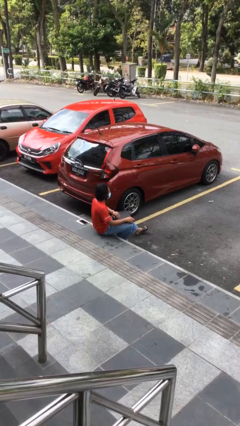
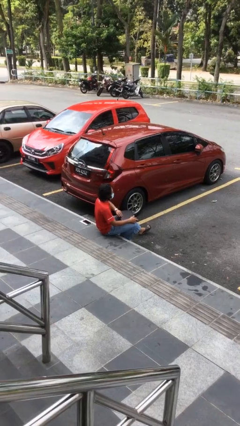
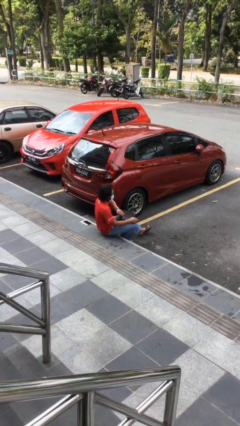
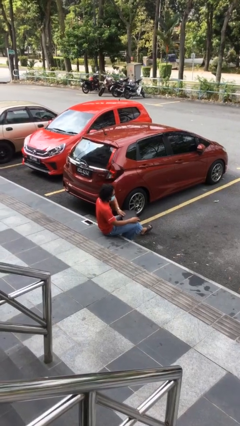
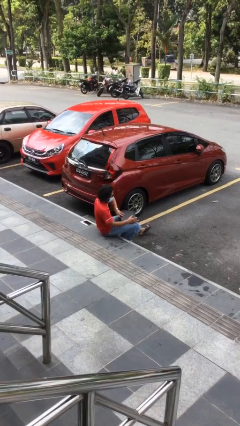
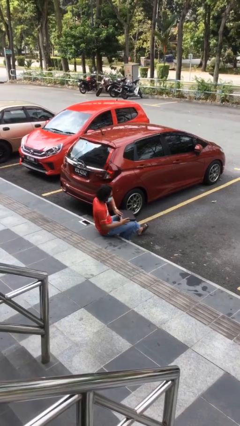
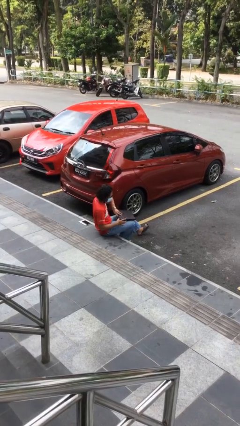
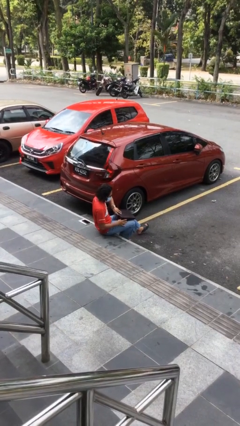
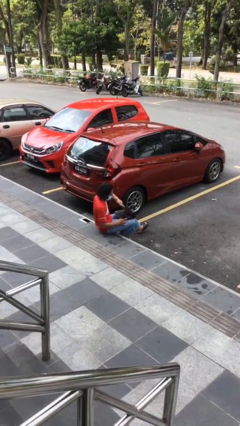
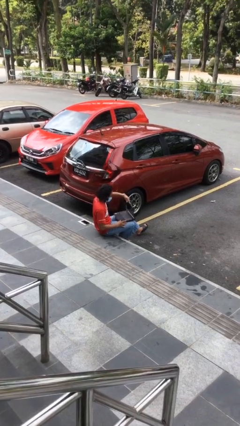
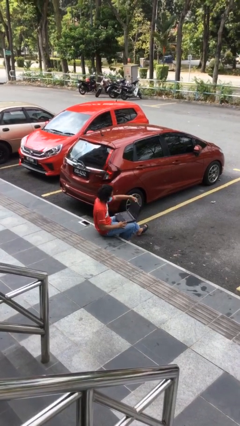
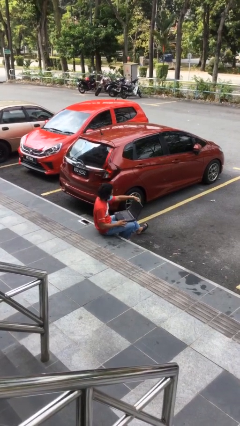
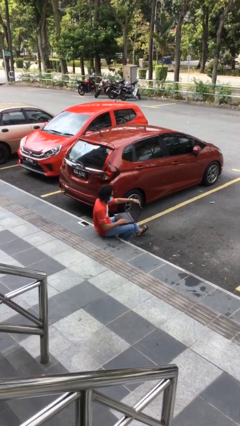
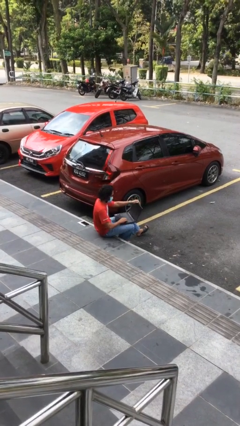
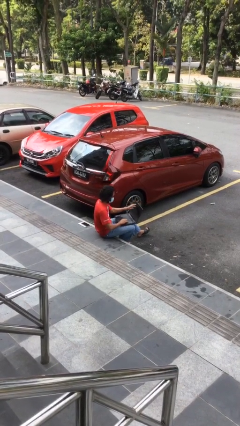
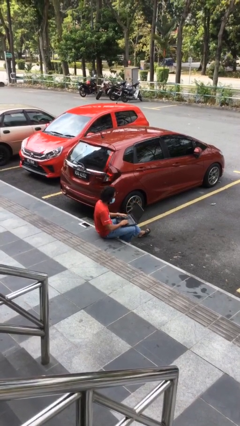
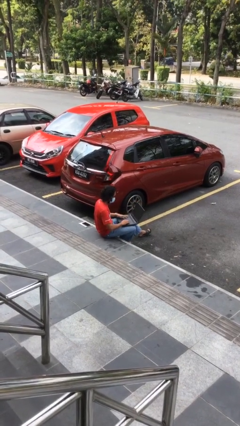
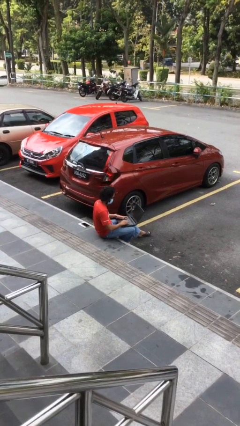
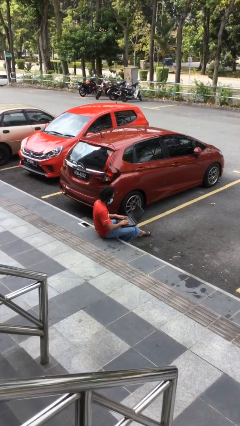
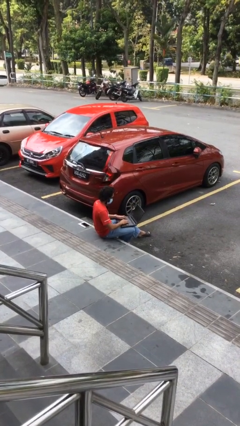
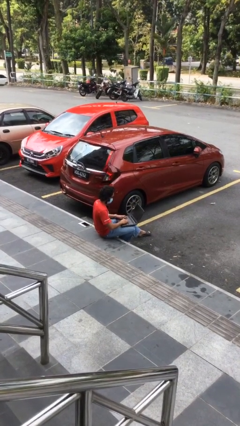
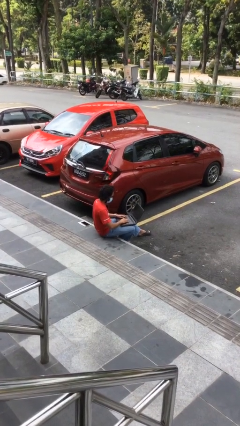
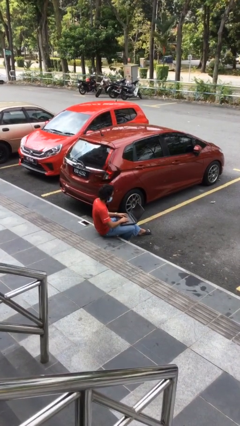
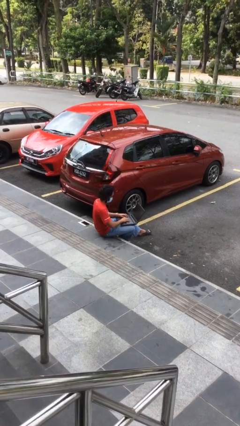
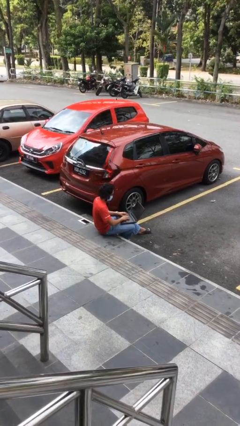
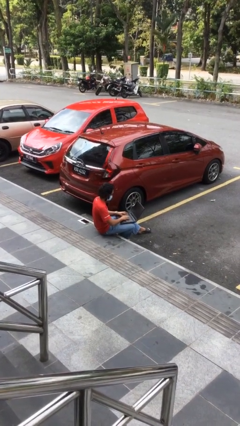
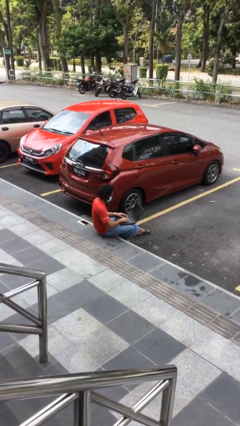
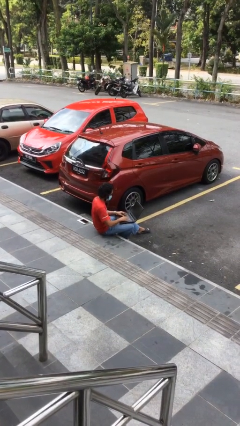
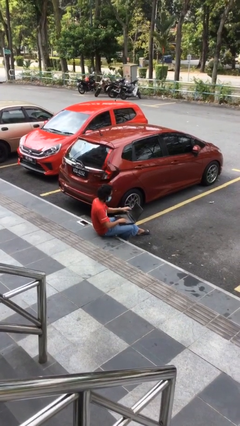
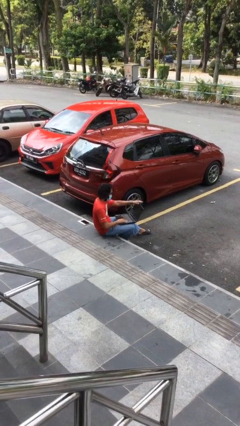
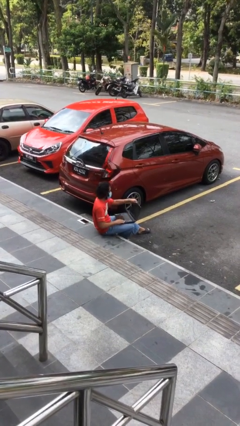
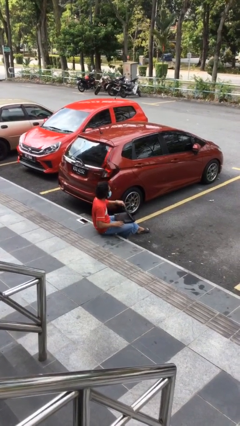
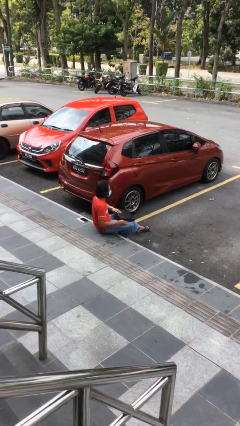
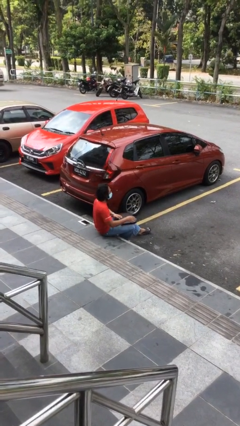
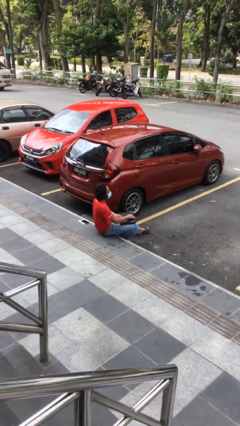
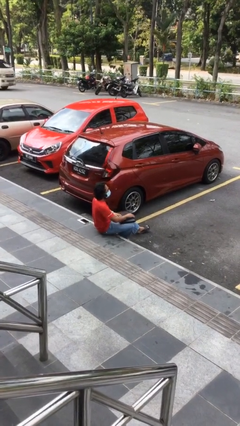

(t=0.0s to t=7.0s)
person interacts with laptop

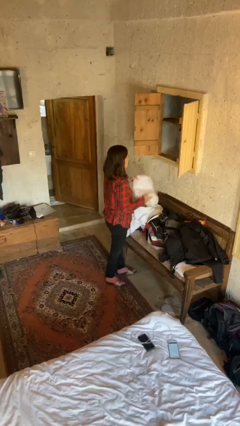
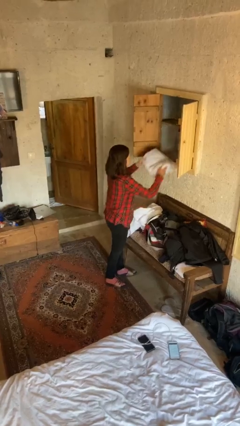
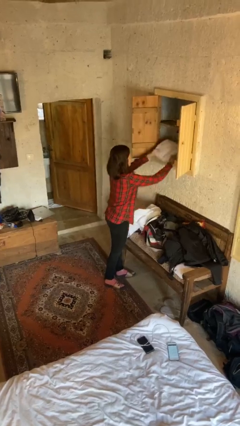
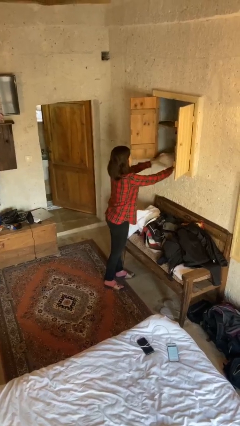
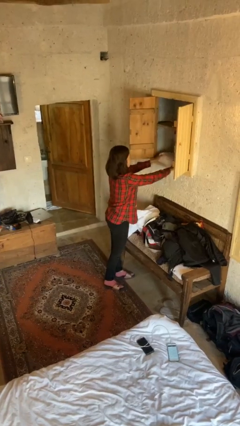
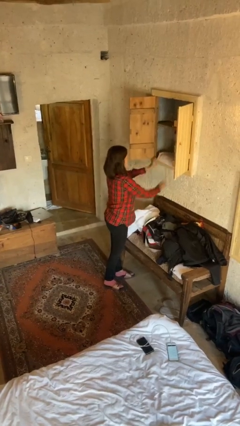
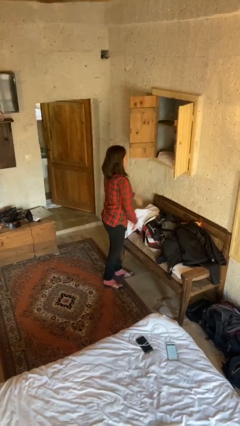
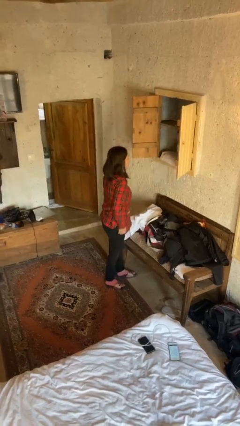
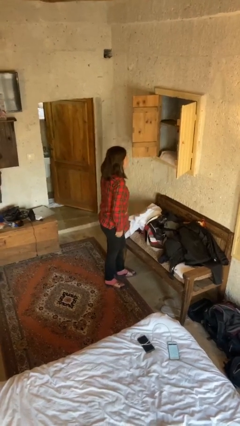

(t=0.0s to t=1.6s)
person puts clothes into dresser

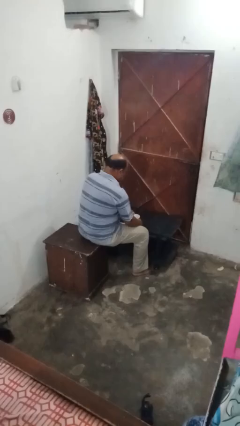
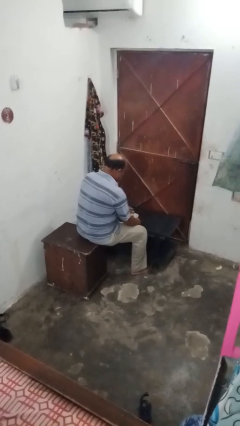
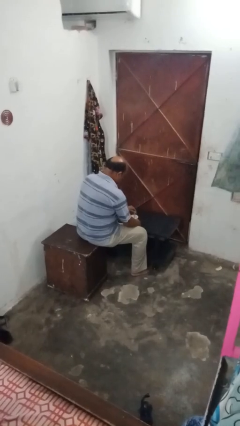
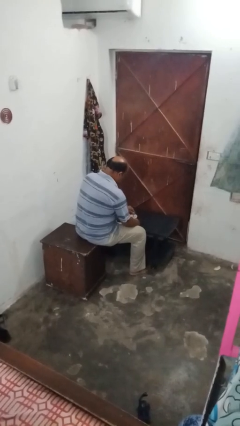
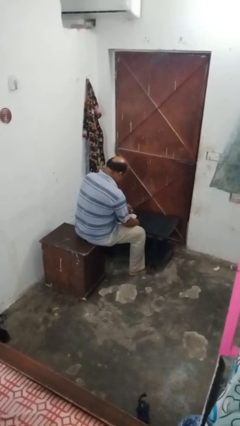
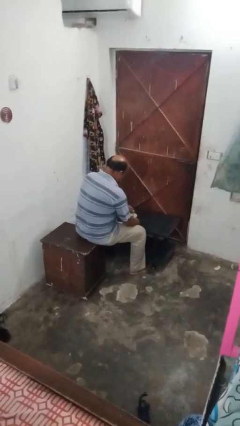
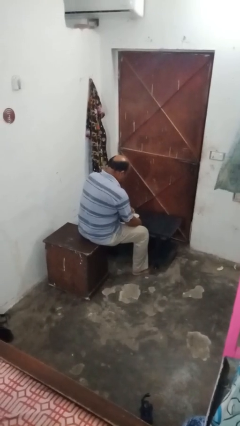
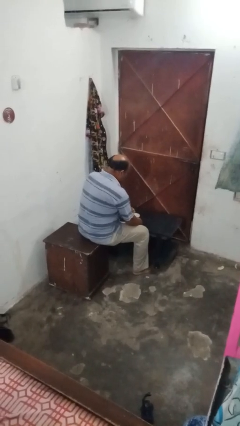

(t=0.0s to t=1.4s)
person stirs mug

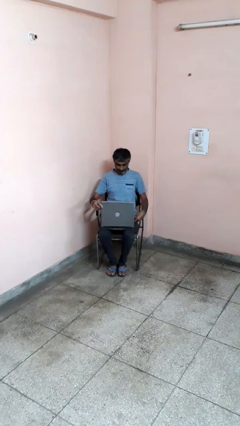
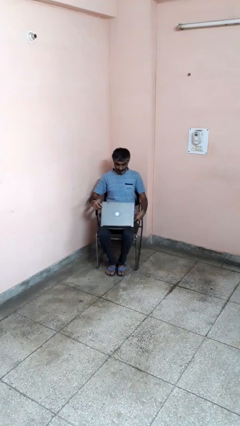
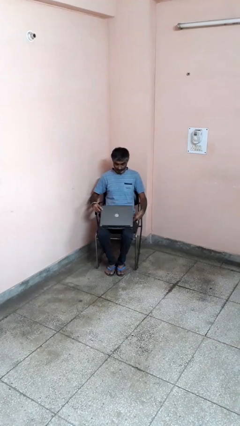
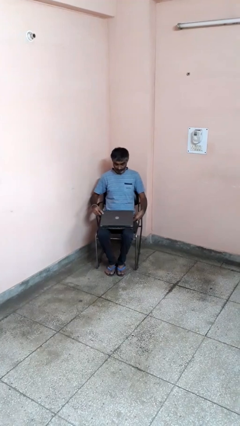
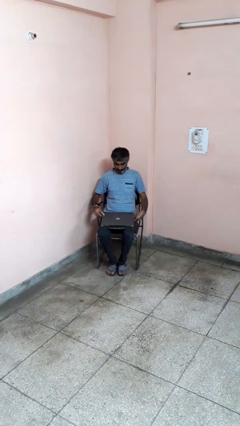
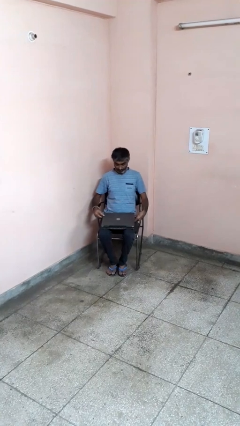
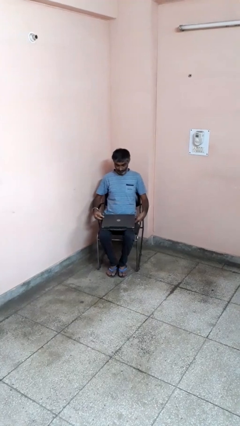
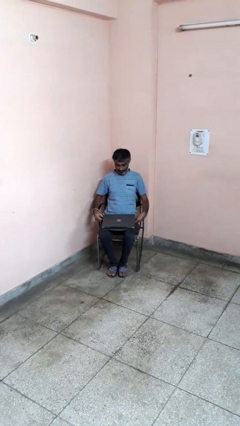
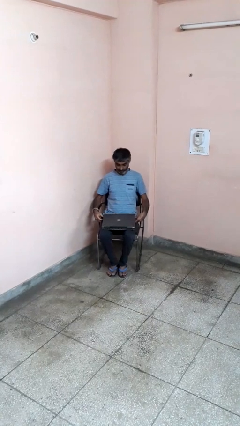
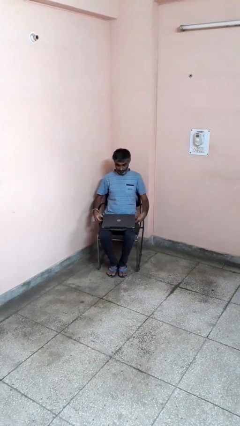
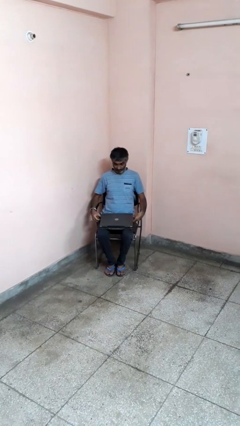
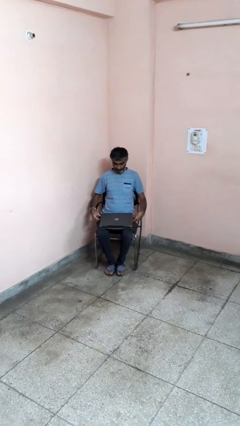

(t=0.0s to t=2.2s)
person closes laptop

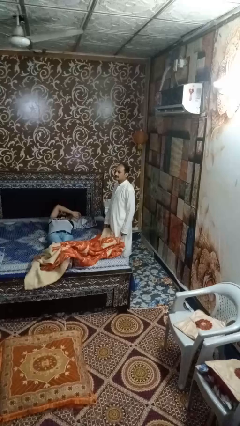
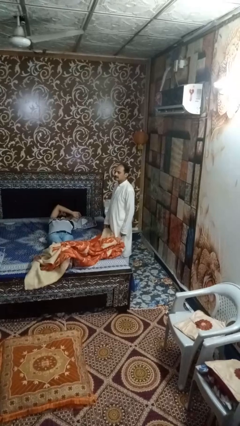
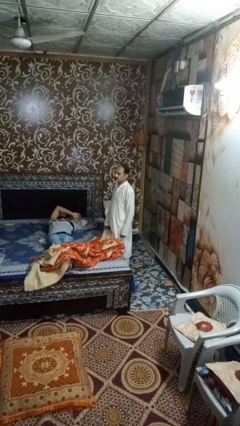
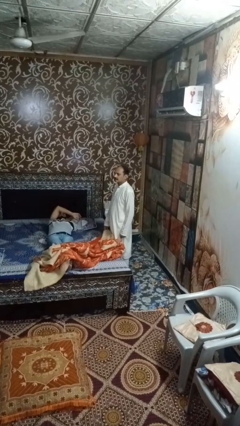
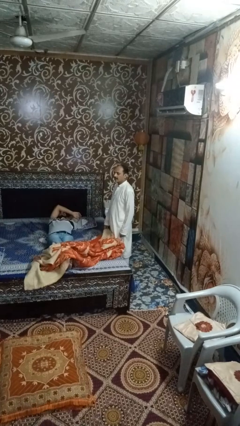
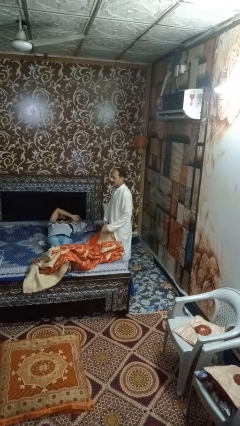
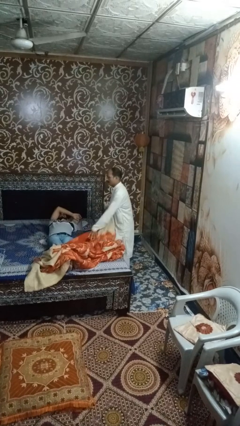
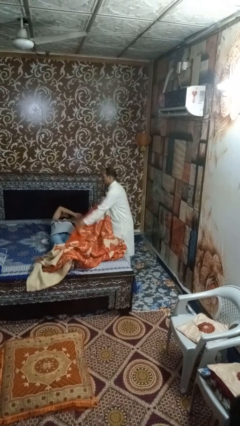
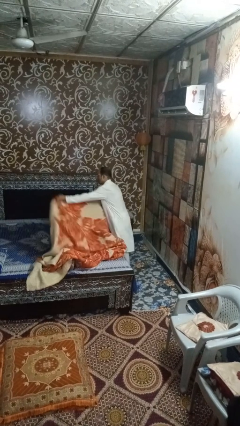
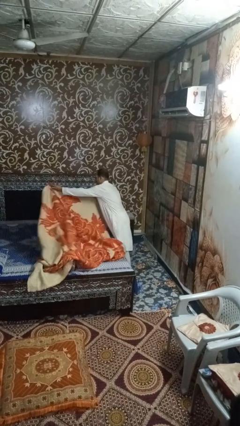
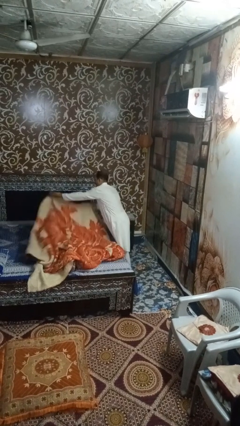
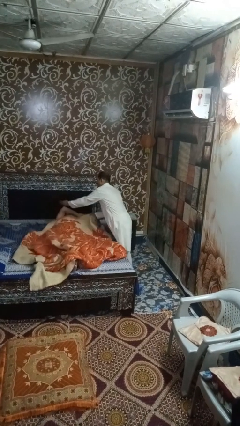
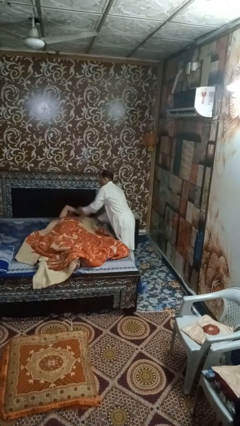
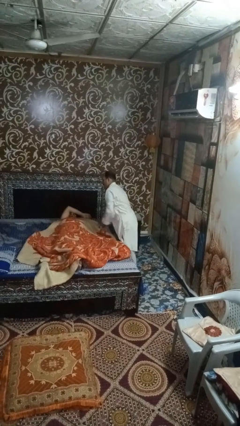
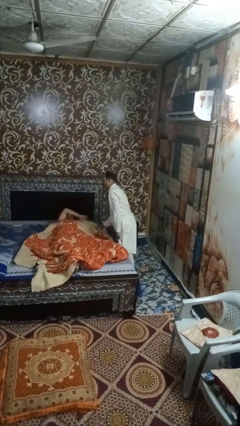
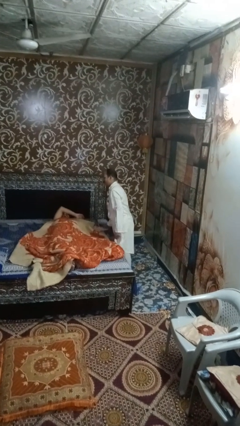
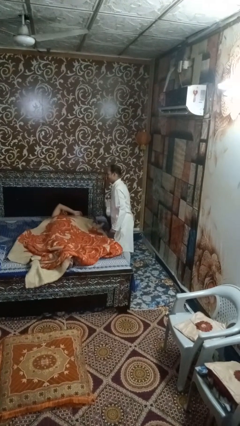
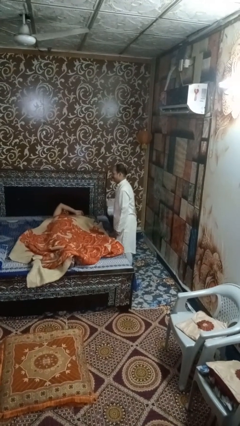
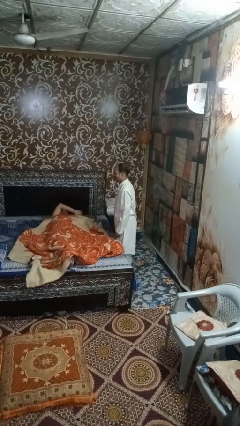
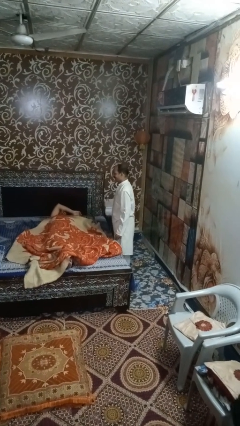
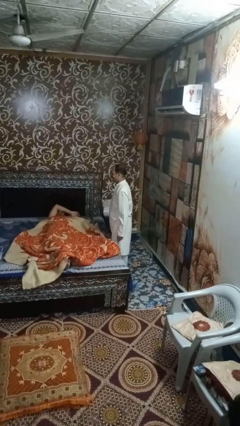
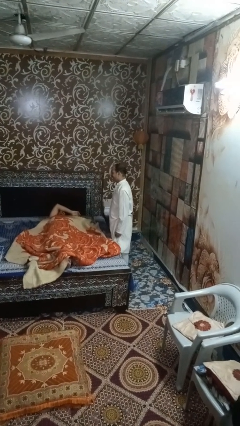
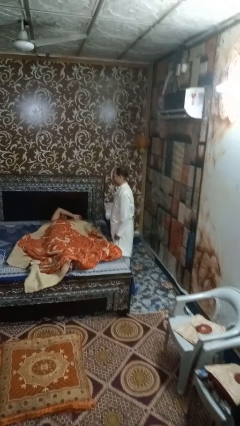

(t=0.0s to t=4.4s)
person covers friend with blanket

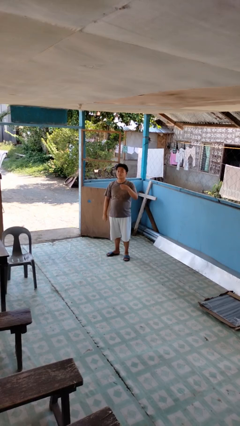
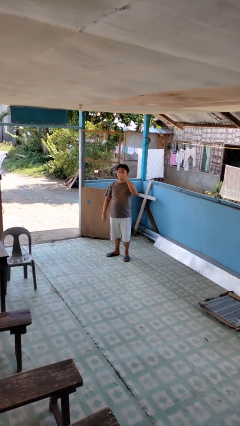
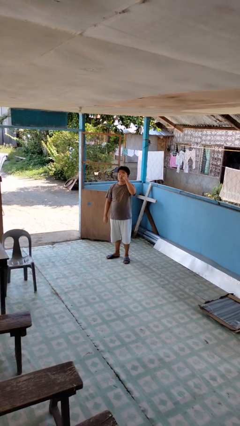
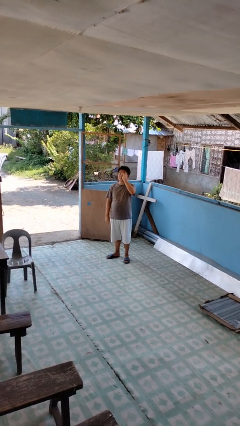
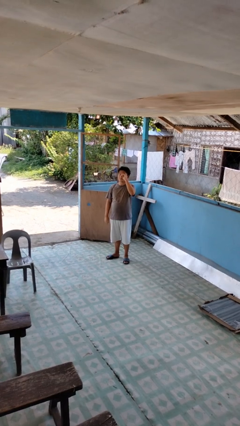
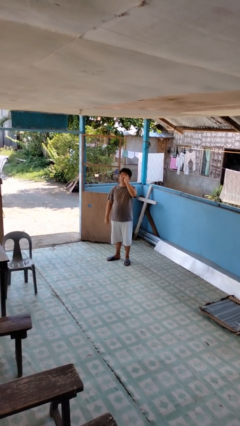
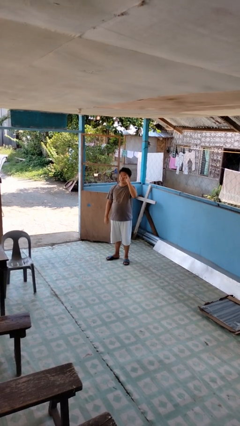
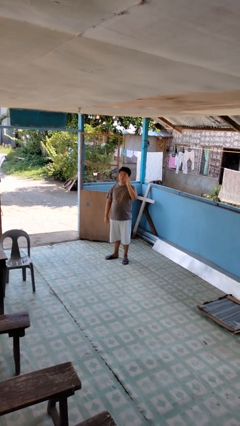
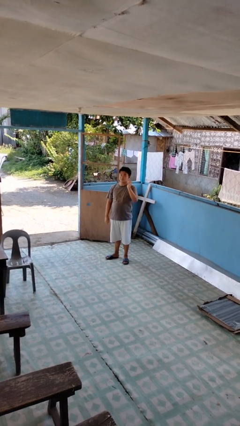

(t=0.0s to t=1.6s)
person rubs eyes
